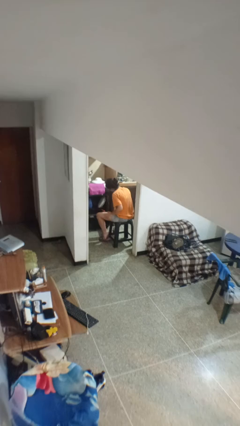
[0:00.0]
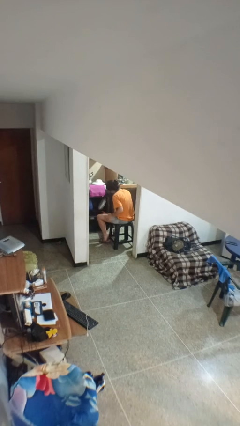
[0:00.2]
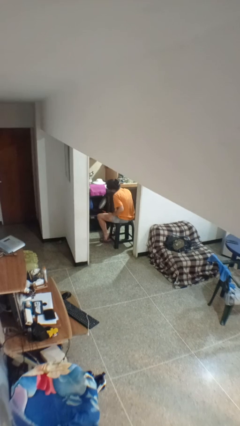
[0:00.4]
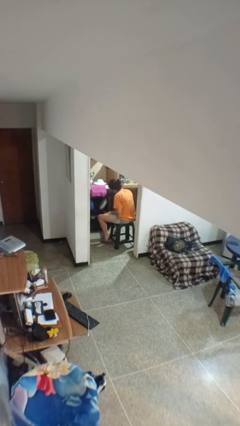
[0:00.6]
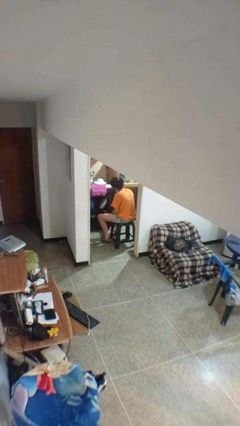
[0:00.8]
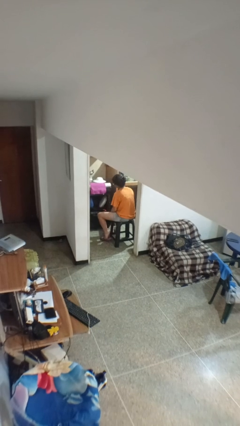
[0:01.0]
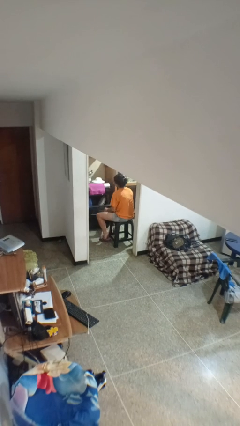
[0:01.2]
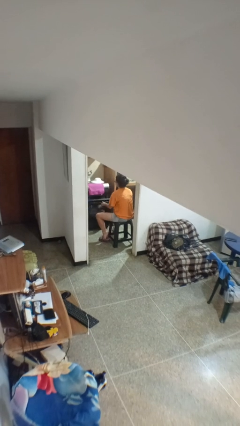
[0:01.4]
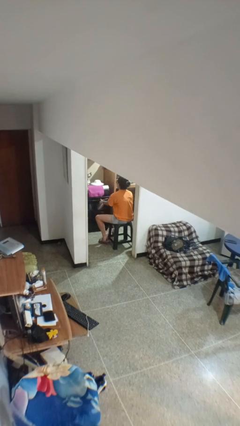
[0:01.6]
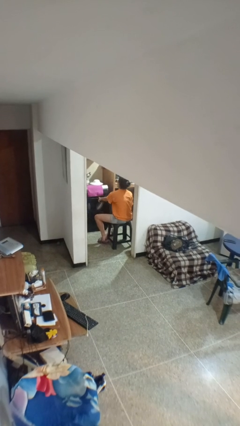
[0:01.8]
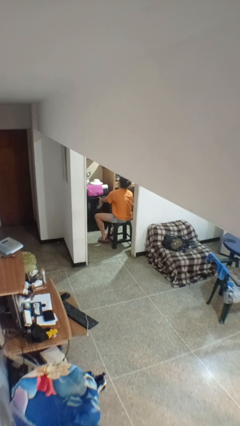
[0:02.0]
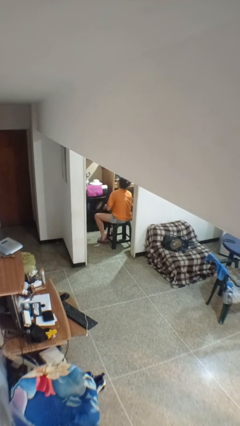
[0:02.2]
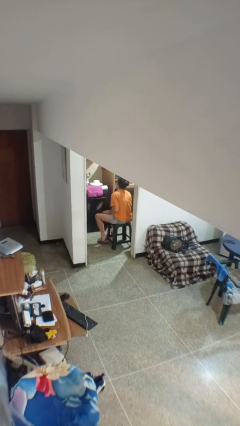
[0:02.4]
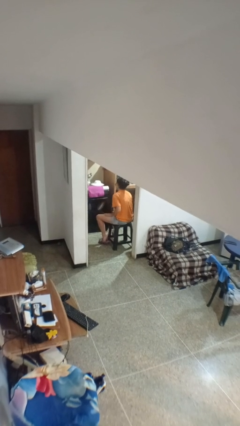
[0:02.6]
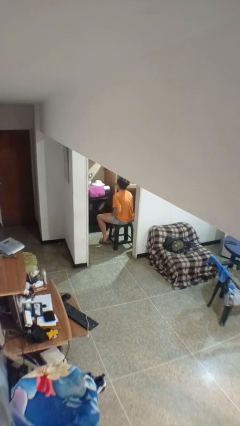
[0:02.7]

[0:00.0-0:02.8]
person closes dishwasher

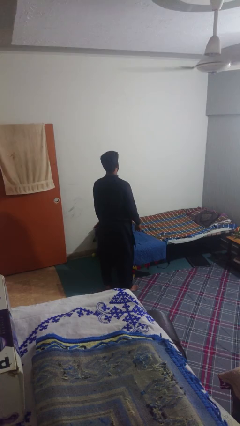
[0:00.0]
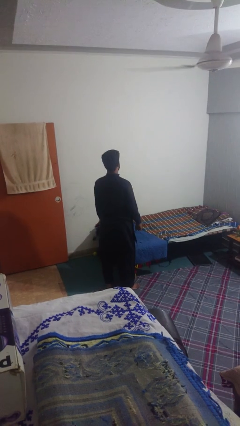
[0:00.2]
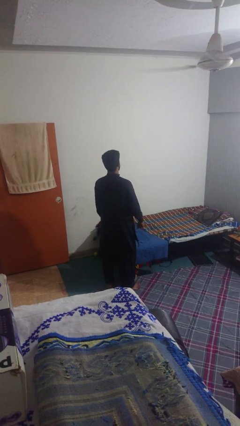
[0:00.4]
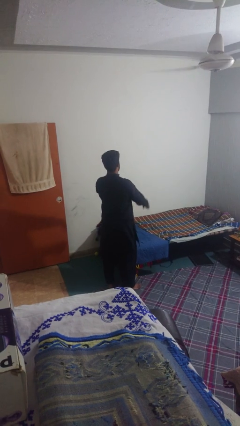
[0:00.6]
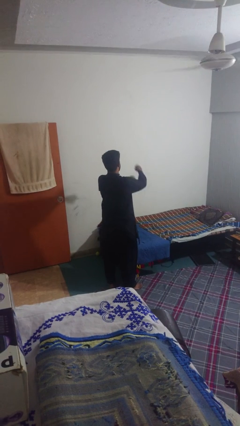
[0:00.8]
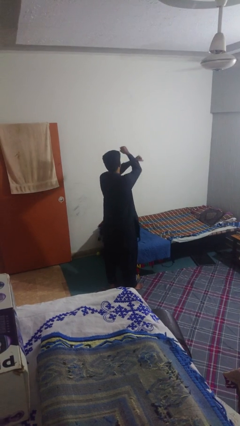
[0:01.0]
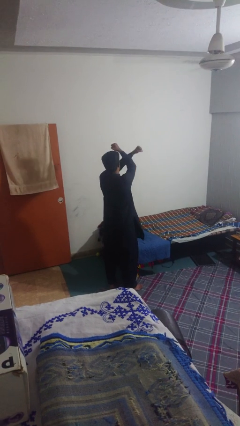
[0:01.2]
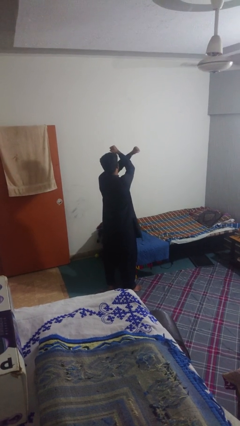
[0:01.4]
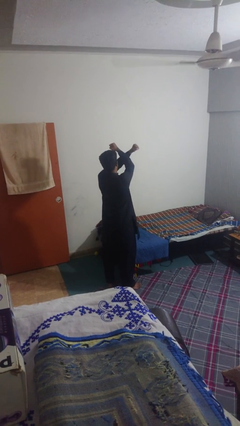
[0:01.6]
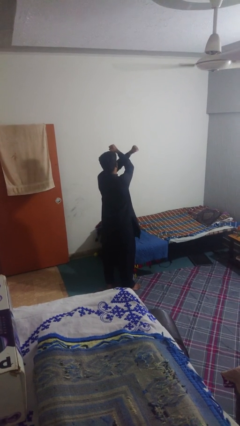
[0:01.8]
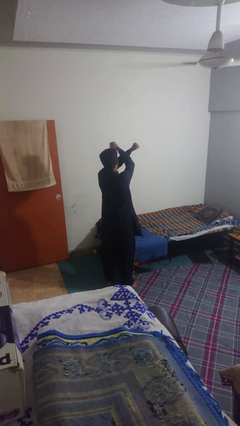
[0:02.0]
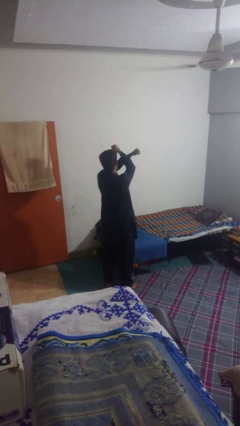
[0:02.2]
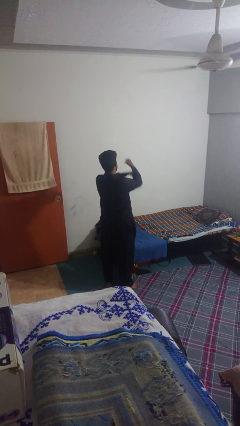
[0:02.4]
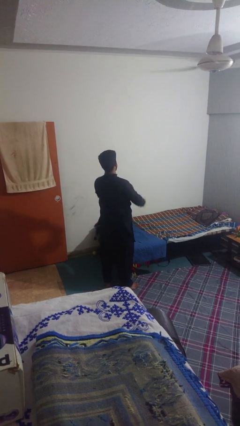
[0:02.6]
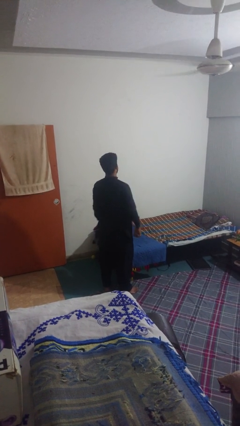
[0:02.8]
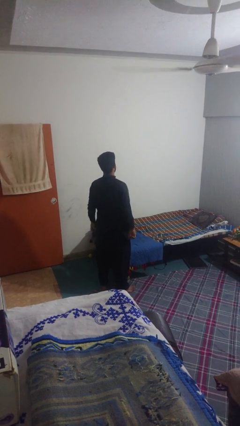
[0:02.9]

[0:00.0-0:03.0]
person gestures arms x

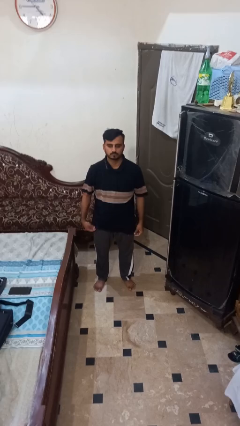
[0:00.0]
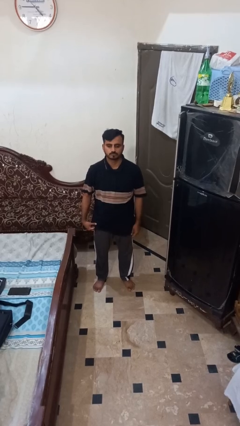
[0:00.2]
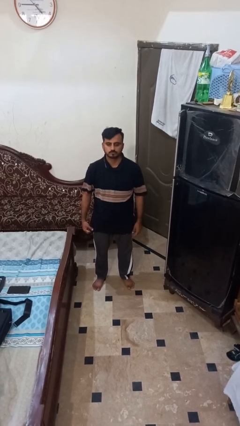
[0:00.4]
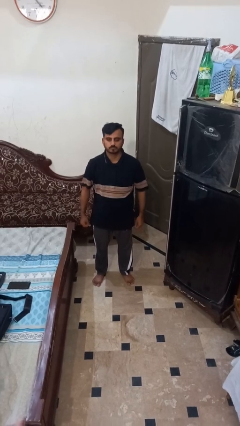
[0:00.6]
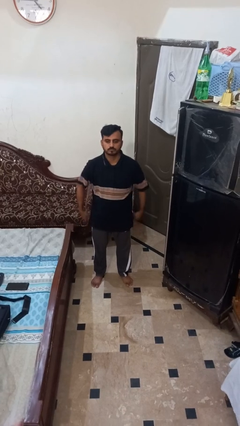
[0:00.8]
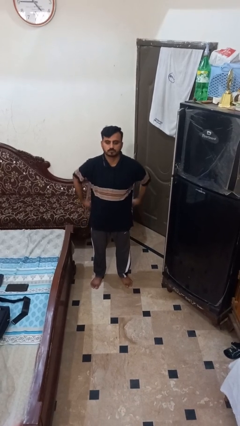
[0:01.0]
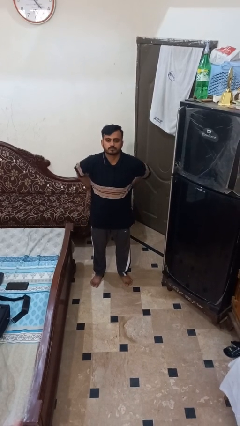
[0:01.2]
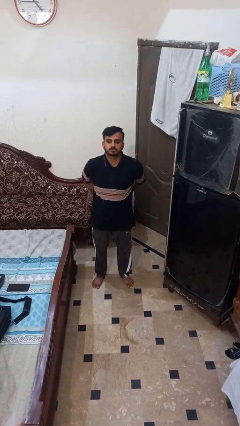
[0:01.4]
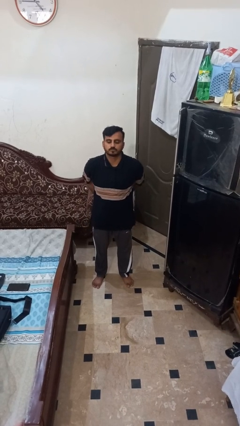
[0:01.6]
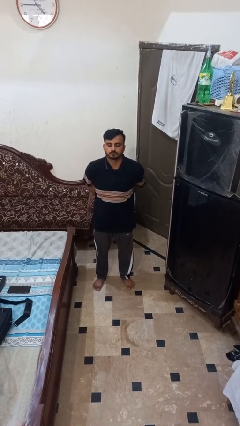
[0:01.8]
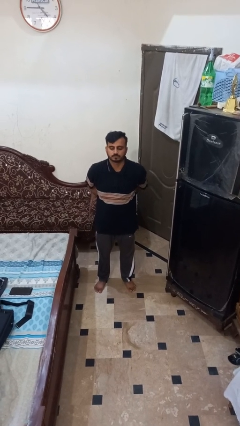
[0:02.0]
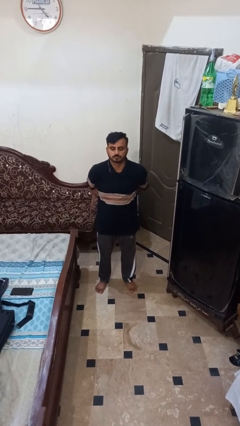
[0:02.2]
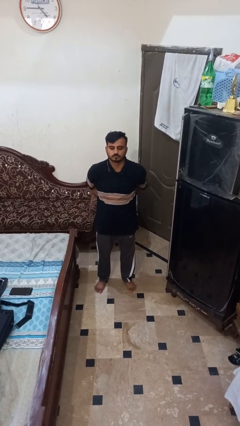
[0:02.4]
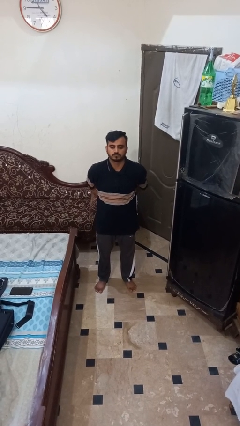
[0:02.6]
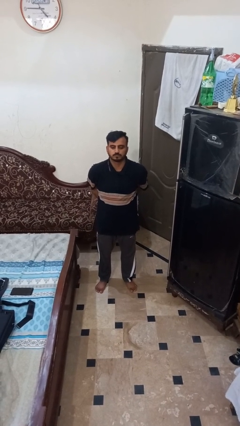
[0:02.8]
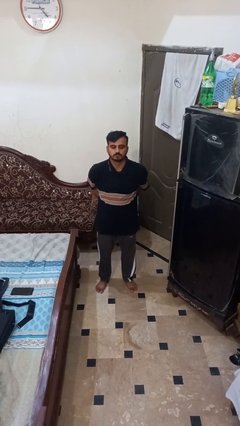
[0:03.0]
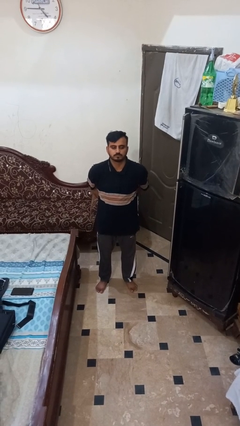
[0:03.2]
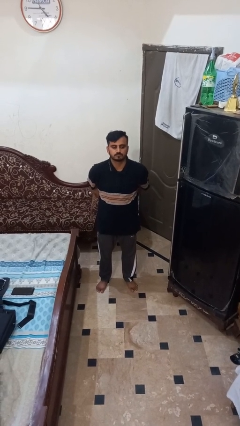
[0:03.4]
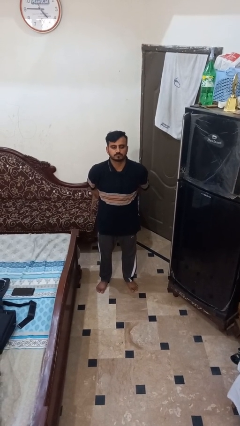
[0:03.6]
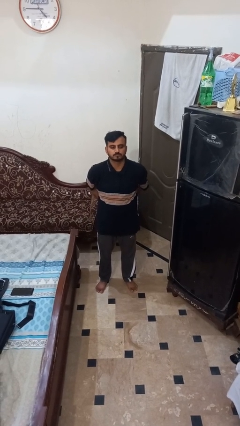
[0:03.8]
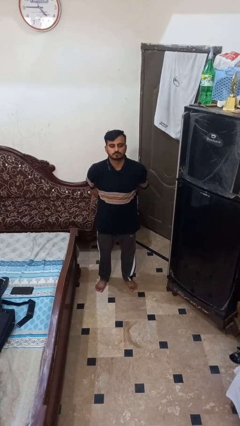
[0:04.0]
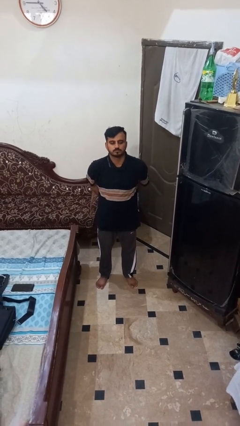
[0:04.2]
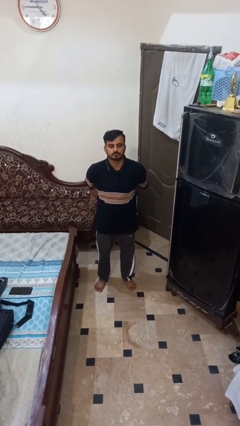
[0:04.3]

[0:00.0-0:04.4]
person puts hands in back pockets

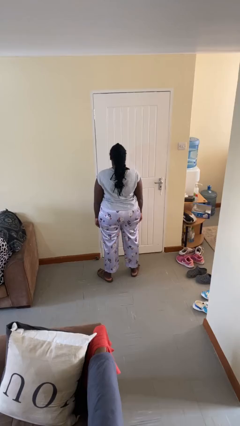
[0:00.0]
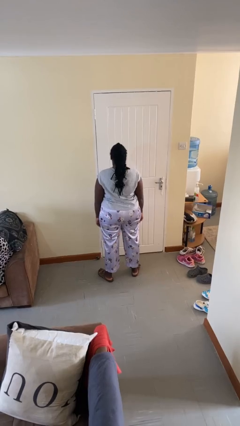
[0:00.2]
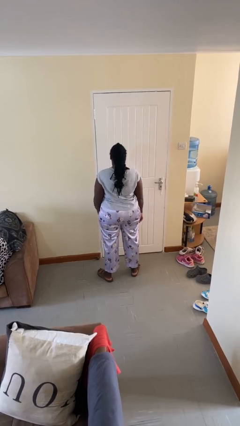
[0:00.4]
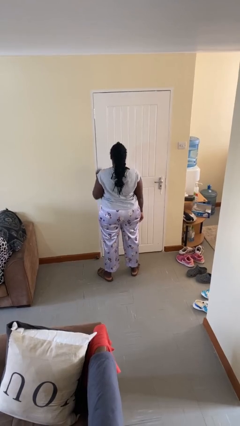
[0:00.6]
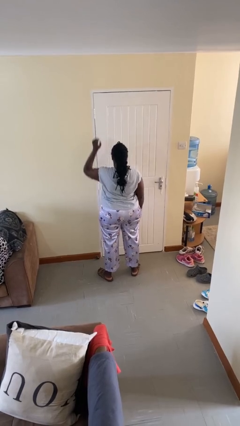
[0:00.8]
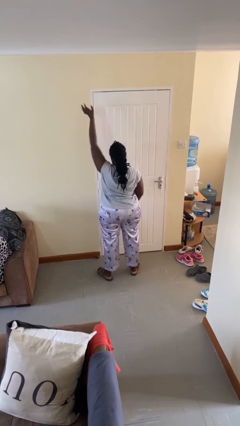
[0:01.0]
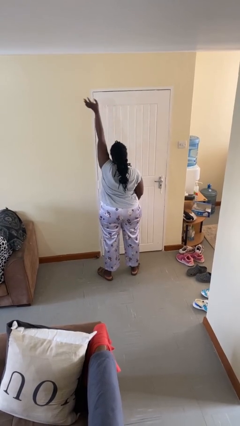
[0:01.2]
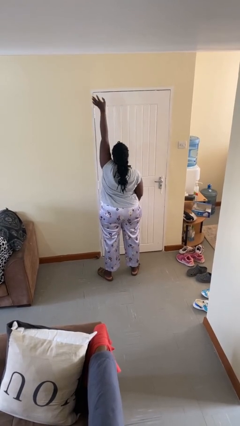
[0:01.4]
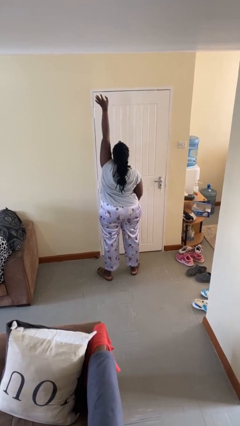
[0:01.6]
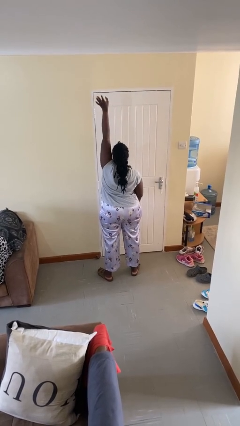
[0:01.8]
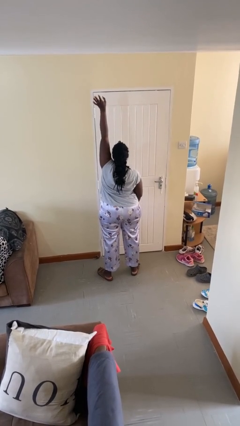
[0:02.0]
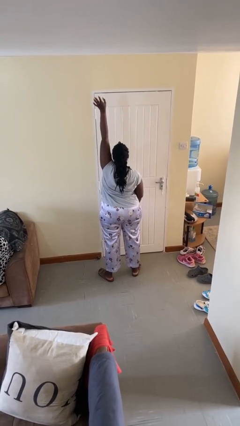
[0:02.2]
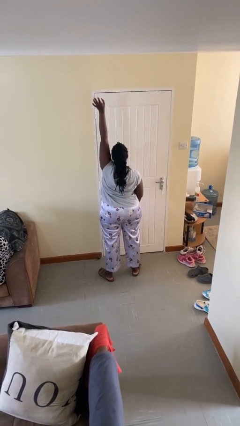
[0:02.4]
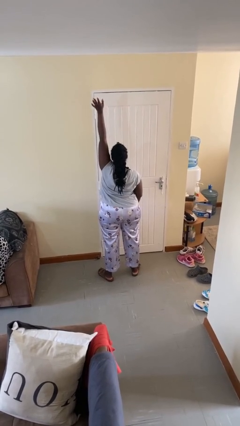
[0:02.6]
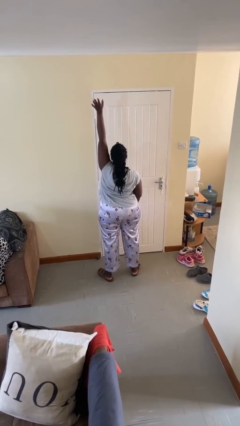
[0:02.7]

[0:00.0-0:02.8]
person gestures raise hand

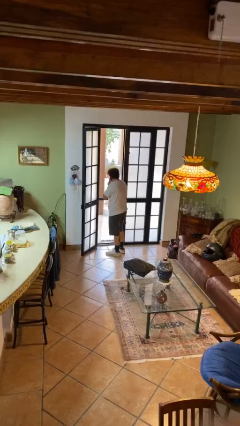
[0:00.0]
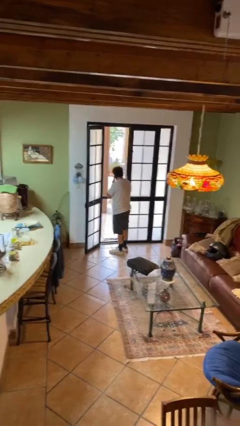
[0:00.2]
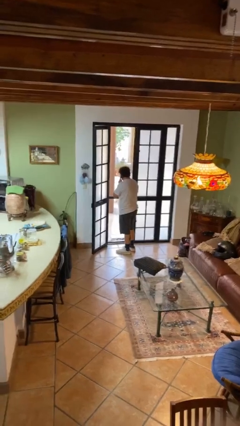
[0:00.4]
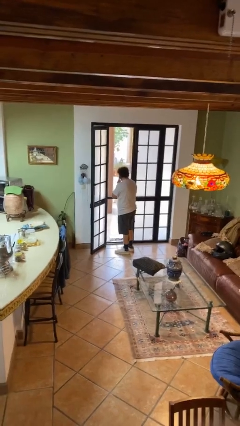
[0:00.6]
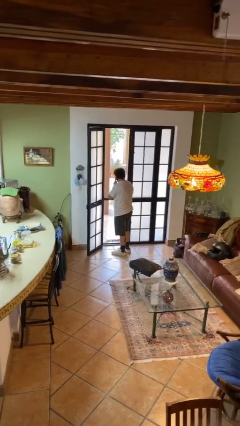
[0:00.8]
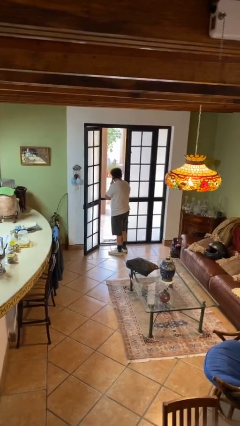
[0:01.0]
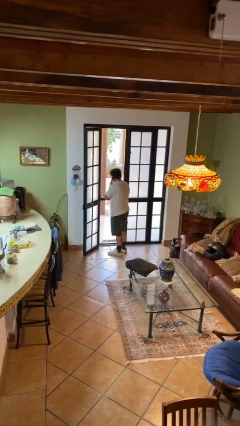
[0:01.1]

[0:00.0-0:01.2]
person closes facility door

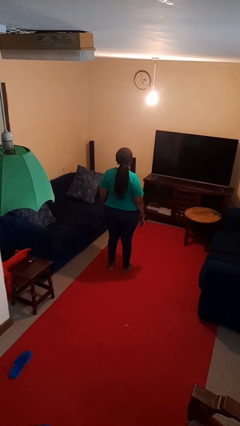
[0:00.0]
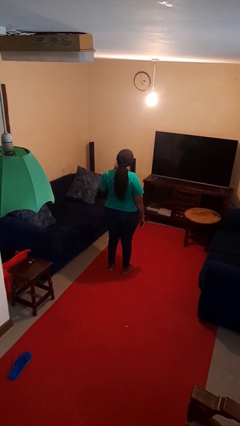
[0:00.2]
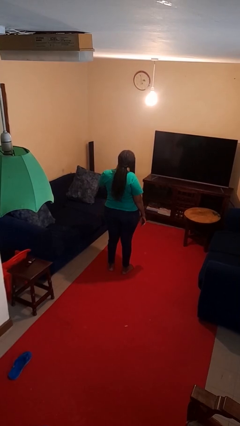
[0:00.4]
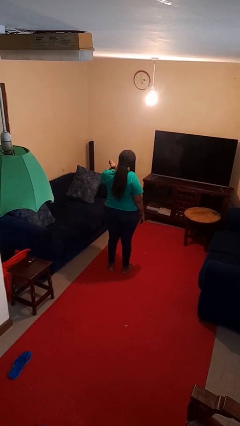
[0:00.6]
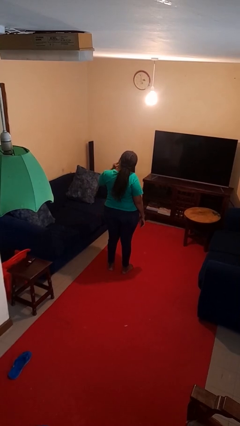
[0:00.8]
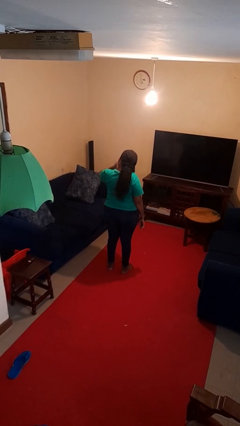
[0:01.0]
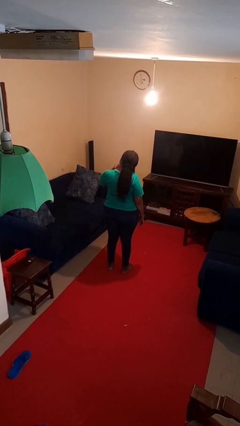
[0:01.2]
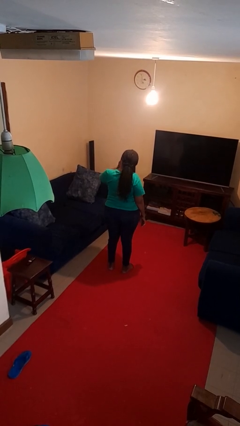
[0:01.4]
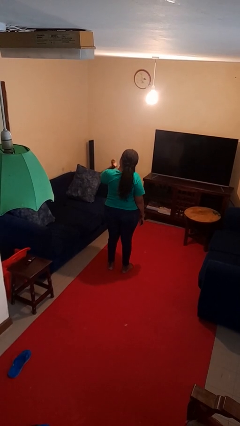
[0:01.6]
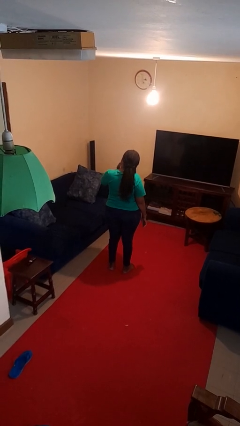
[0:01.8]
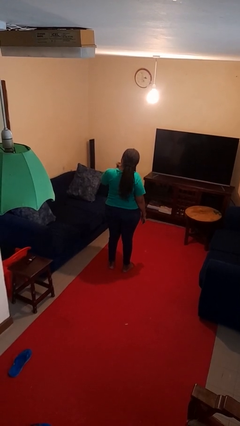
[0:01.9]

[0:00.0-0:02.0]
person swats bug

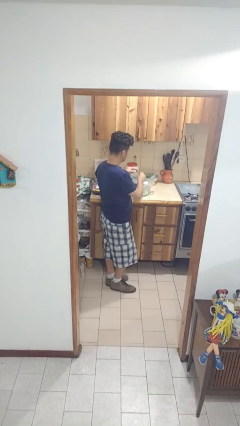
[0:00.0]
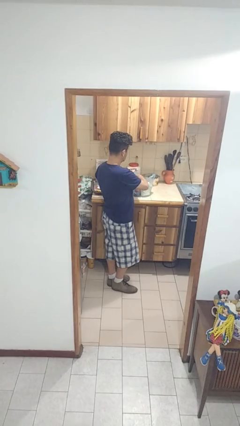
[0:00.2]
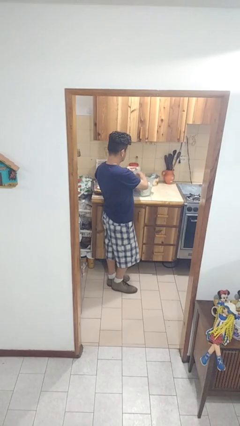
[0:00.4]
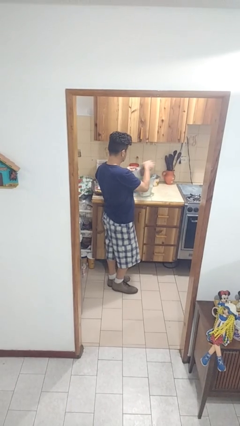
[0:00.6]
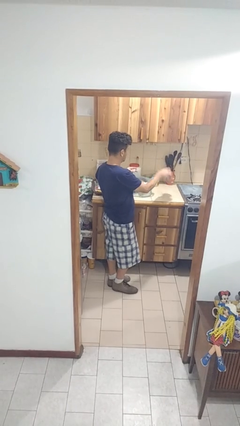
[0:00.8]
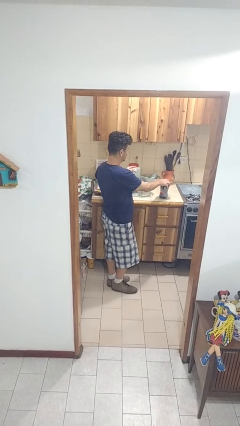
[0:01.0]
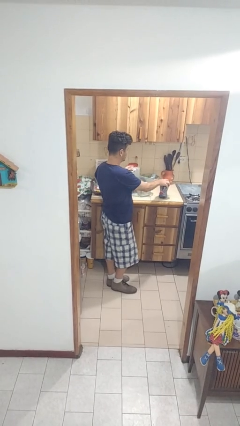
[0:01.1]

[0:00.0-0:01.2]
person takes object from bag

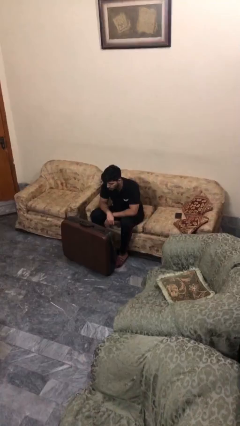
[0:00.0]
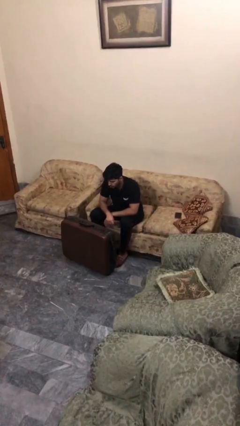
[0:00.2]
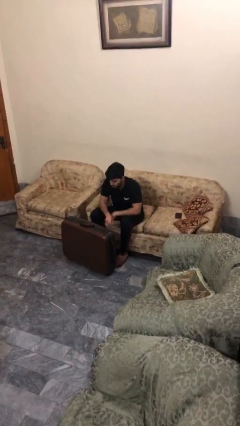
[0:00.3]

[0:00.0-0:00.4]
person opens suitcase
